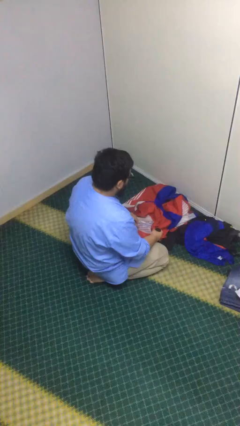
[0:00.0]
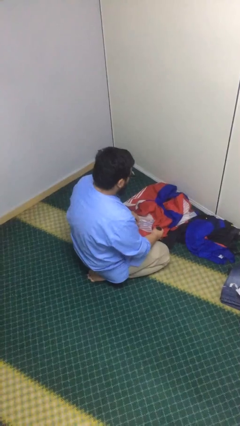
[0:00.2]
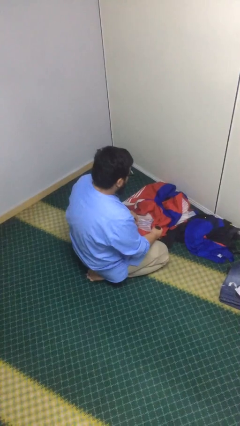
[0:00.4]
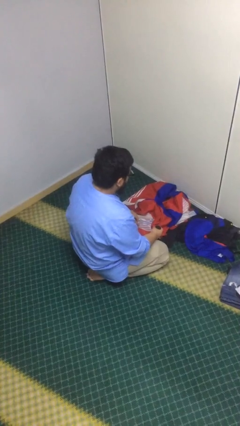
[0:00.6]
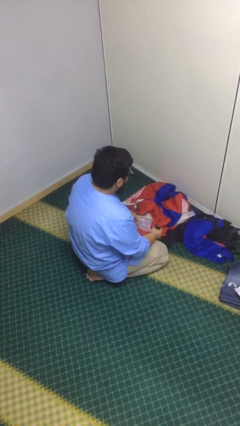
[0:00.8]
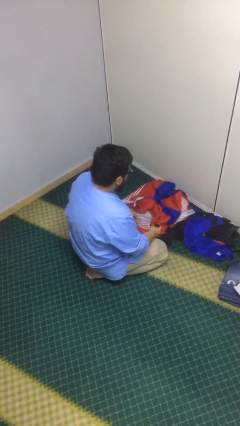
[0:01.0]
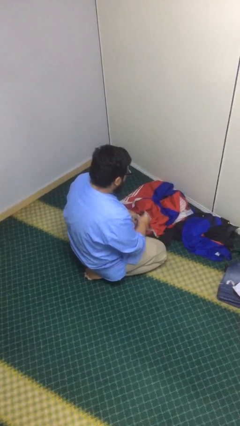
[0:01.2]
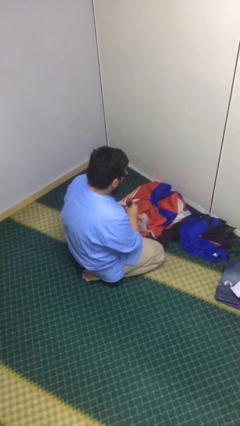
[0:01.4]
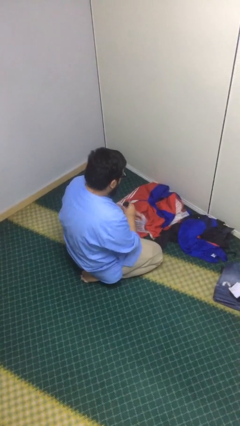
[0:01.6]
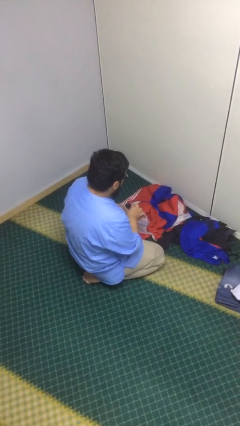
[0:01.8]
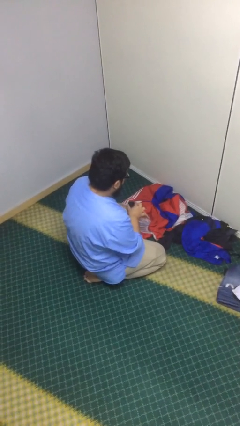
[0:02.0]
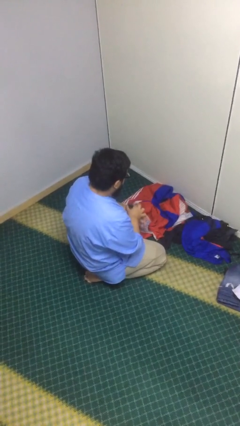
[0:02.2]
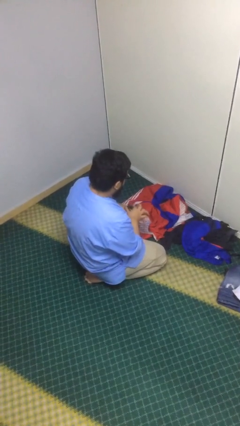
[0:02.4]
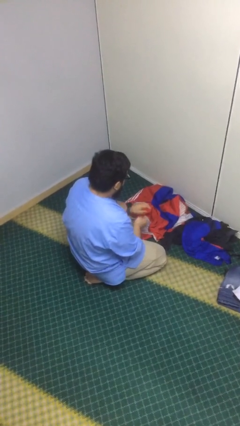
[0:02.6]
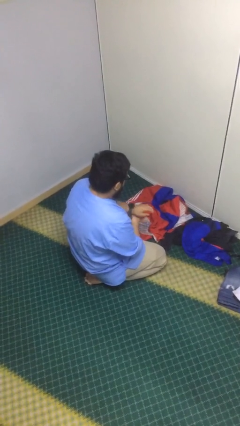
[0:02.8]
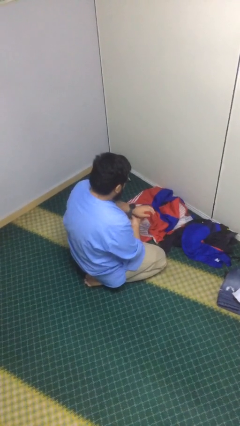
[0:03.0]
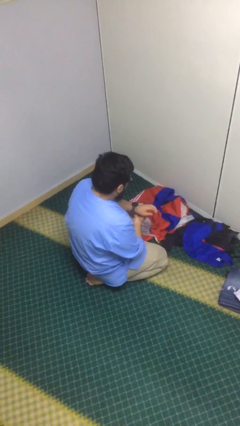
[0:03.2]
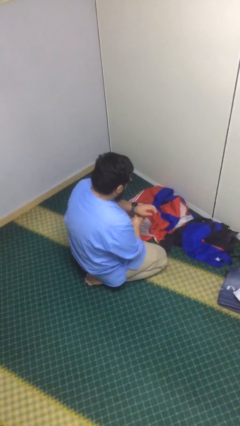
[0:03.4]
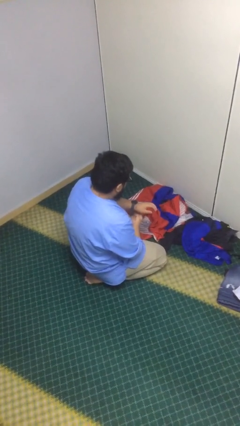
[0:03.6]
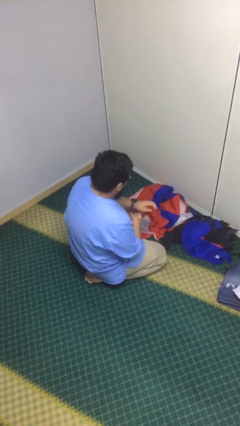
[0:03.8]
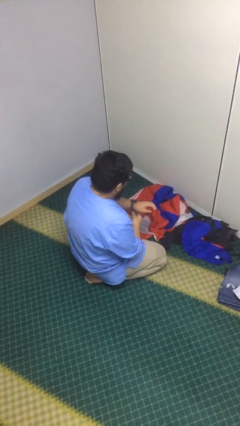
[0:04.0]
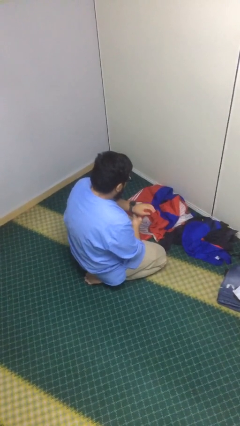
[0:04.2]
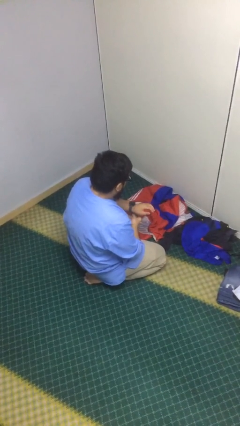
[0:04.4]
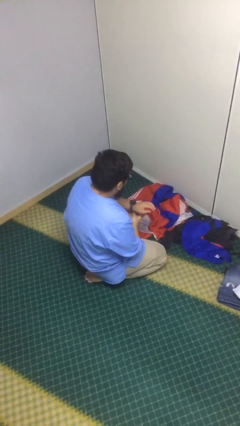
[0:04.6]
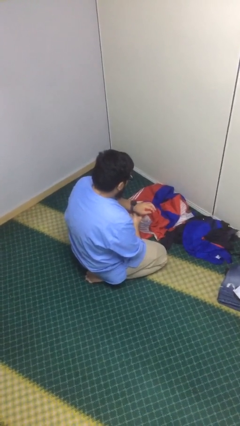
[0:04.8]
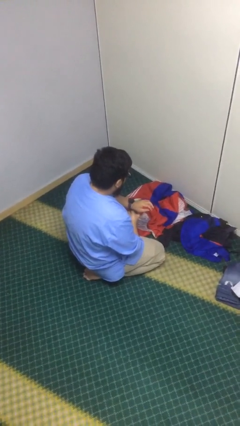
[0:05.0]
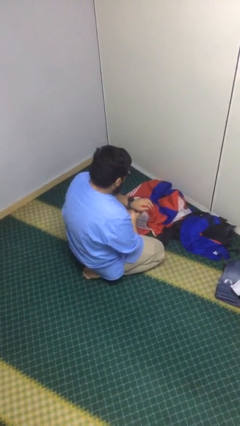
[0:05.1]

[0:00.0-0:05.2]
person puts on wristwatch

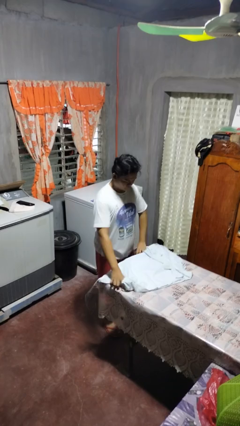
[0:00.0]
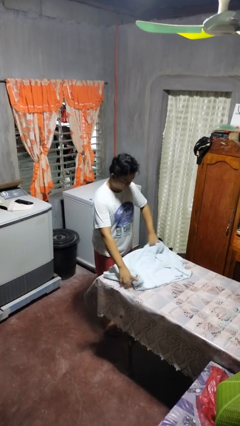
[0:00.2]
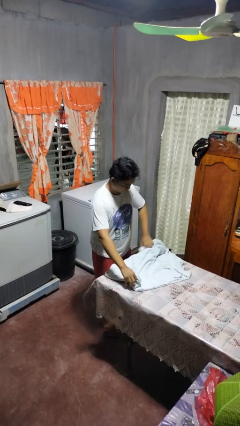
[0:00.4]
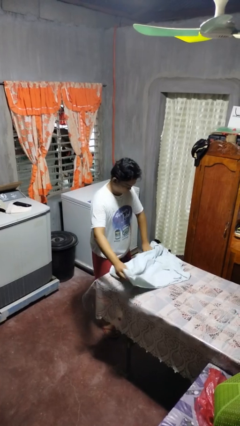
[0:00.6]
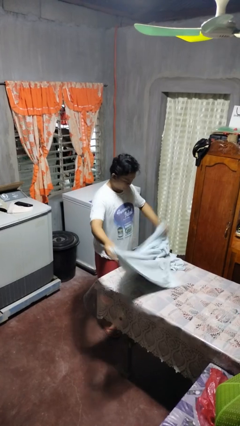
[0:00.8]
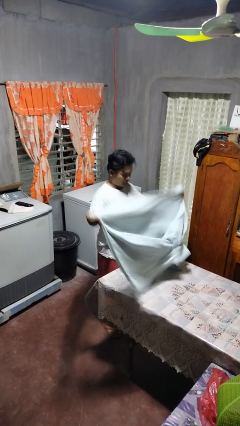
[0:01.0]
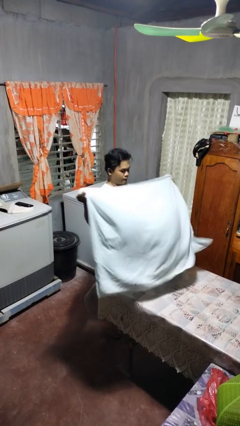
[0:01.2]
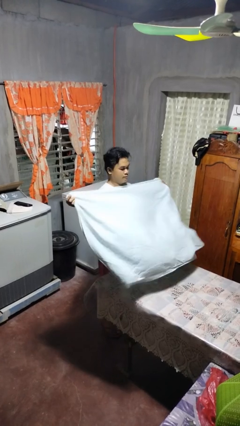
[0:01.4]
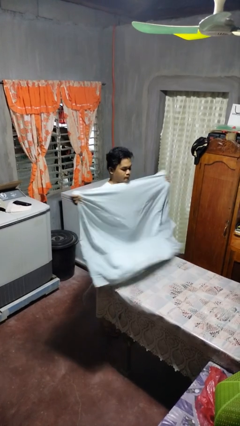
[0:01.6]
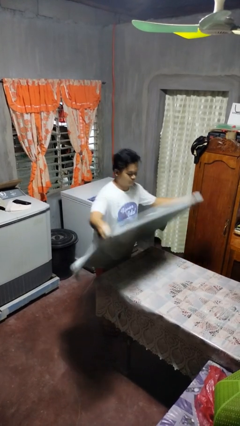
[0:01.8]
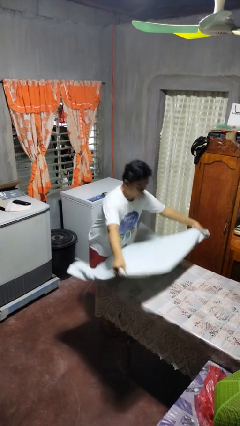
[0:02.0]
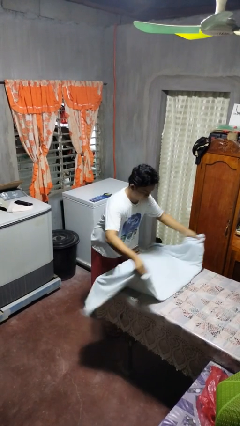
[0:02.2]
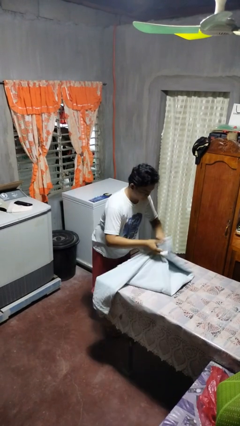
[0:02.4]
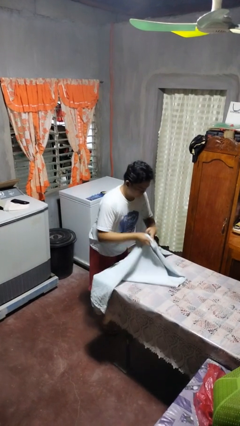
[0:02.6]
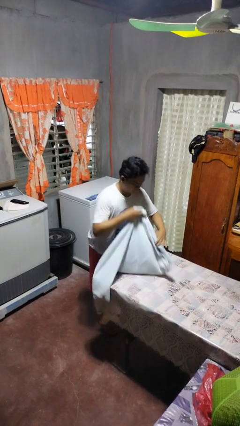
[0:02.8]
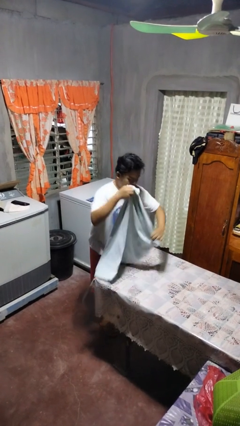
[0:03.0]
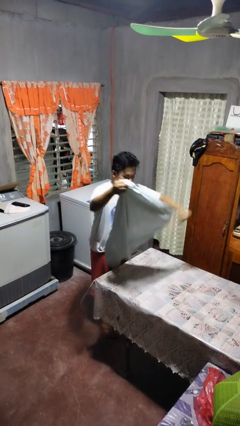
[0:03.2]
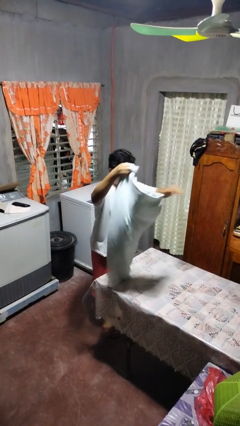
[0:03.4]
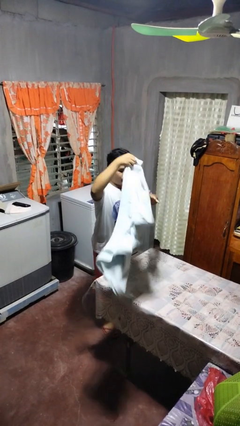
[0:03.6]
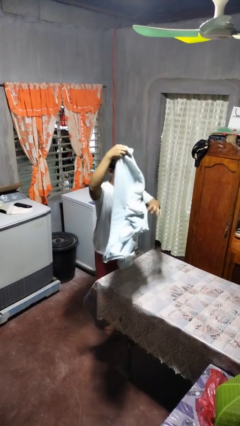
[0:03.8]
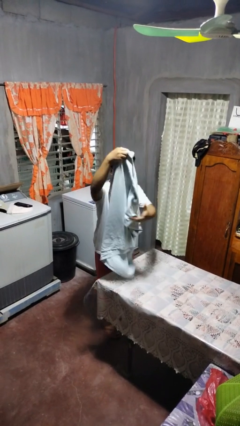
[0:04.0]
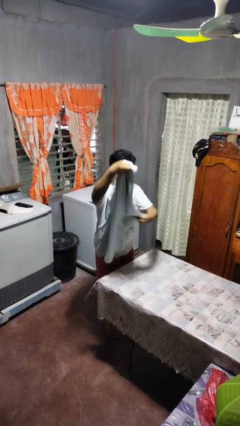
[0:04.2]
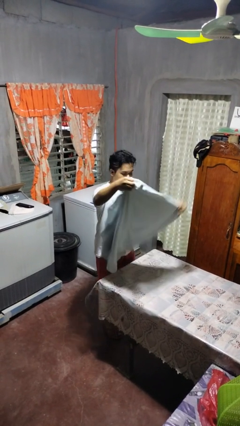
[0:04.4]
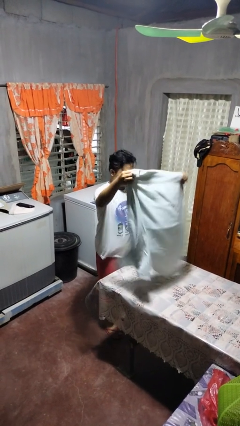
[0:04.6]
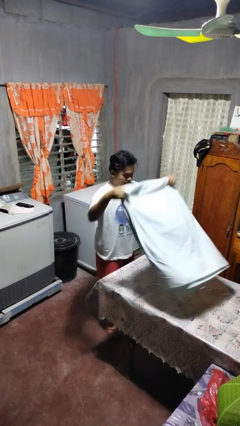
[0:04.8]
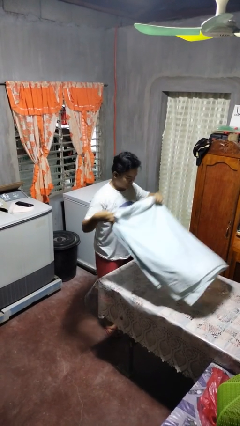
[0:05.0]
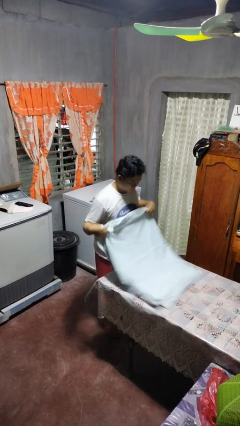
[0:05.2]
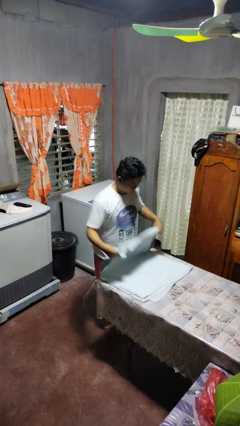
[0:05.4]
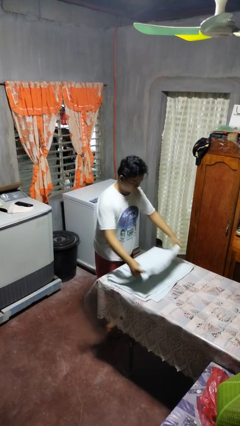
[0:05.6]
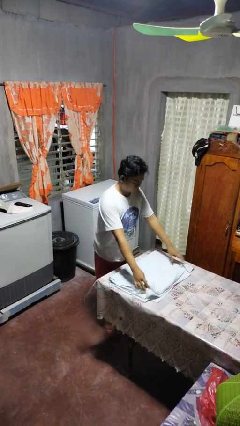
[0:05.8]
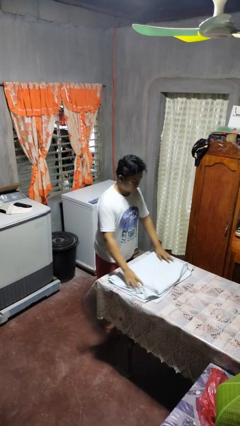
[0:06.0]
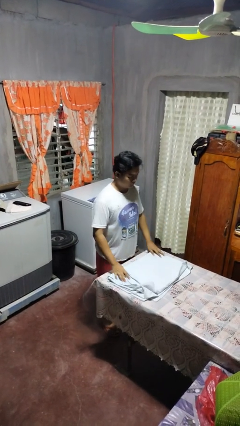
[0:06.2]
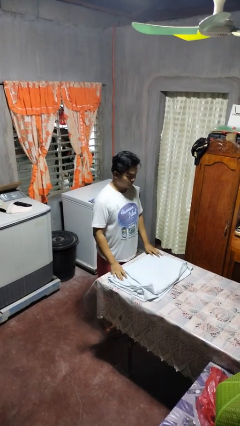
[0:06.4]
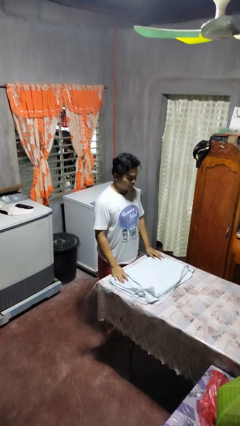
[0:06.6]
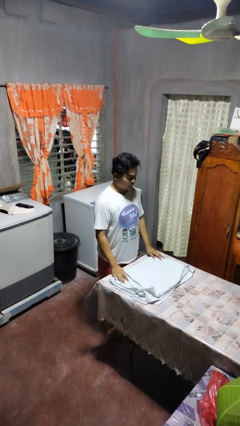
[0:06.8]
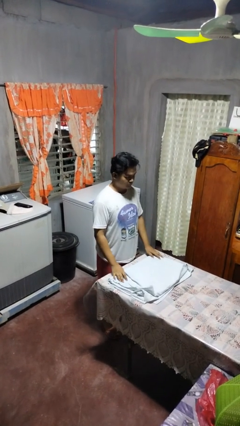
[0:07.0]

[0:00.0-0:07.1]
person folds blanket

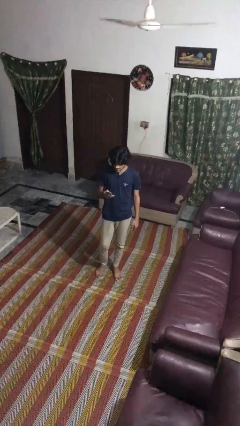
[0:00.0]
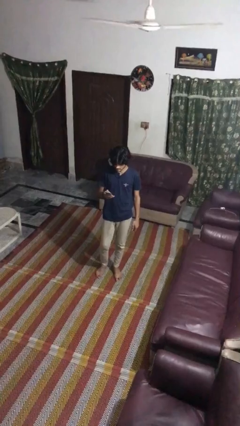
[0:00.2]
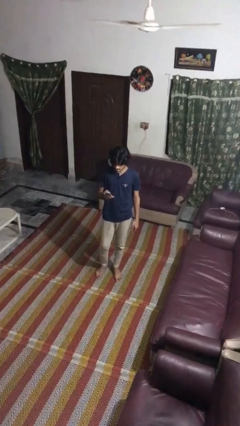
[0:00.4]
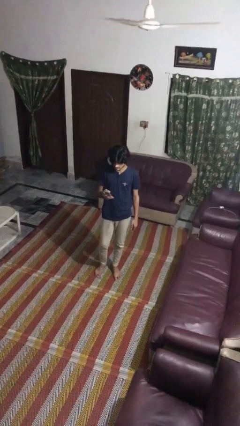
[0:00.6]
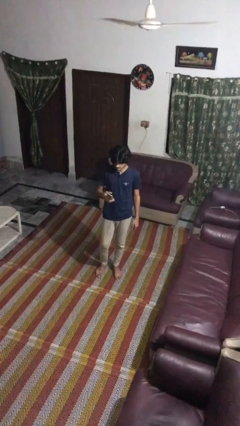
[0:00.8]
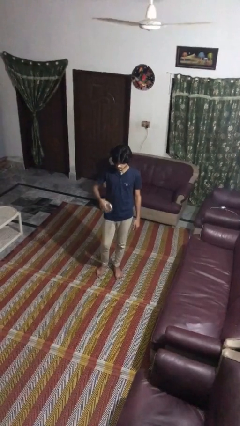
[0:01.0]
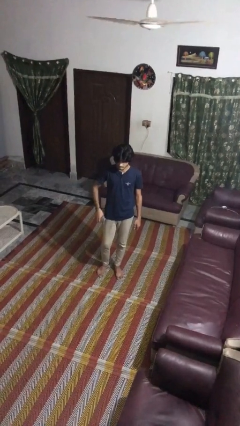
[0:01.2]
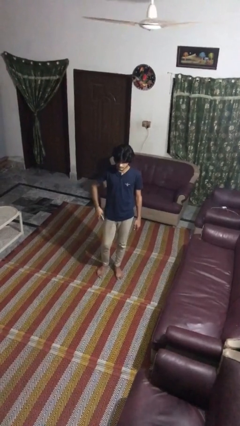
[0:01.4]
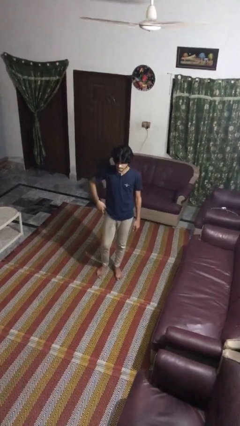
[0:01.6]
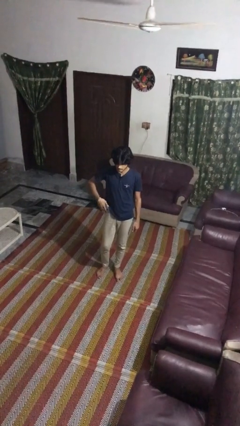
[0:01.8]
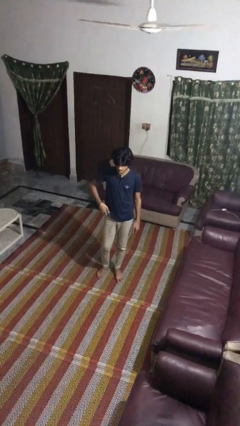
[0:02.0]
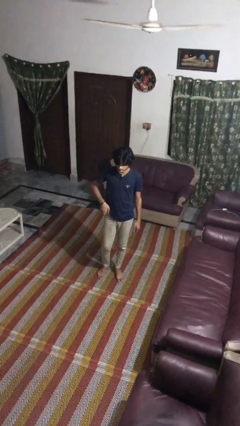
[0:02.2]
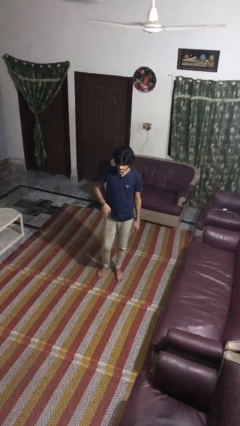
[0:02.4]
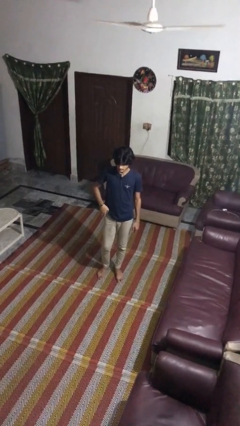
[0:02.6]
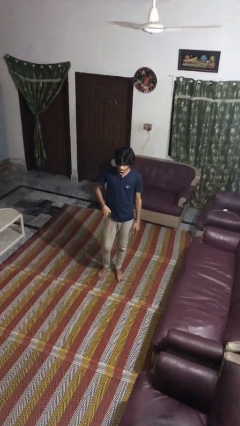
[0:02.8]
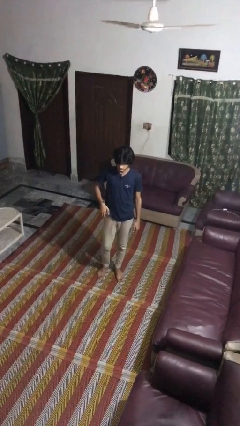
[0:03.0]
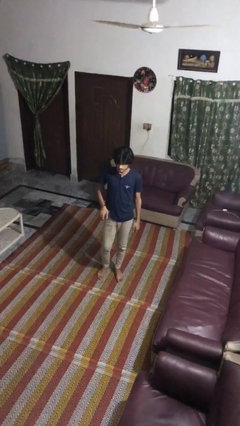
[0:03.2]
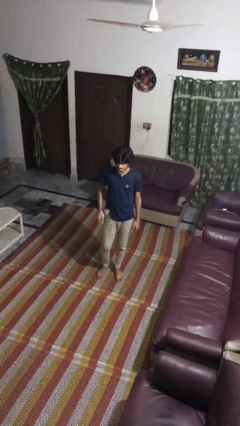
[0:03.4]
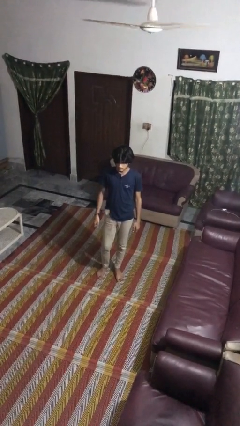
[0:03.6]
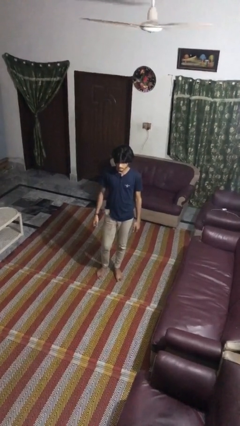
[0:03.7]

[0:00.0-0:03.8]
person puts phone into pocket

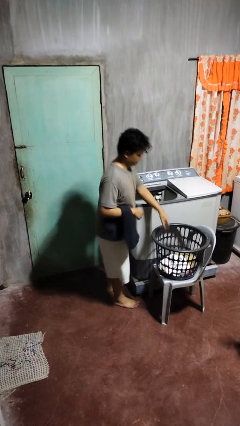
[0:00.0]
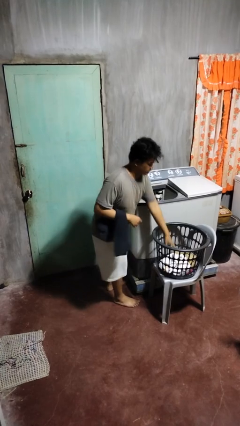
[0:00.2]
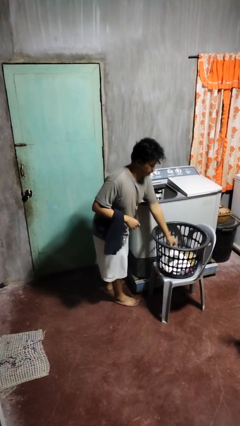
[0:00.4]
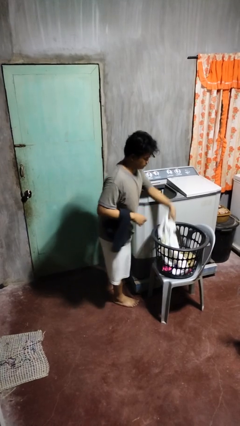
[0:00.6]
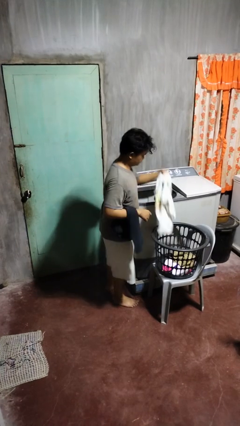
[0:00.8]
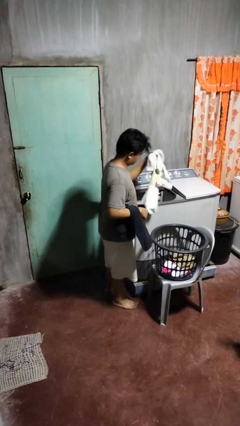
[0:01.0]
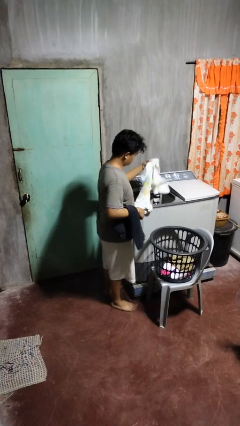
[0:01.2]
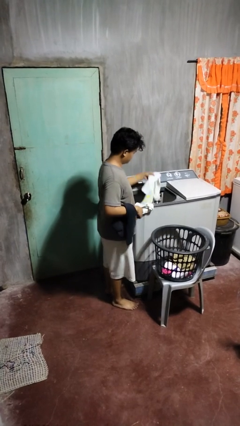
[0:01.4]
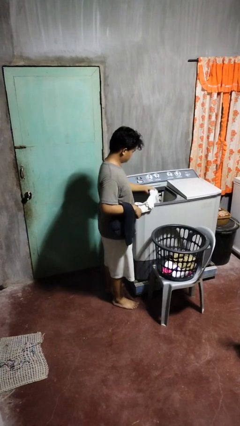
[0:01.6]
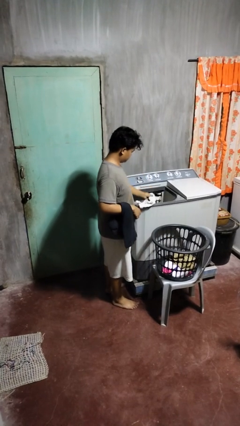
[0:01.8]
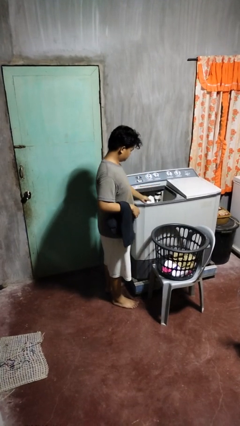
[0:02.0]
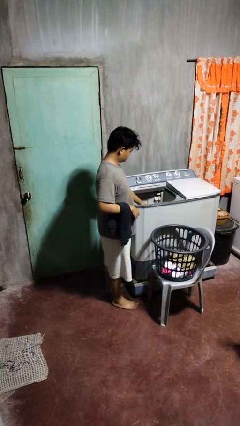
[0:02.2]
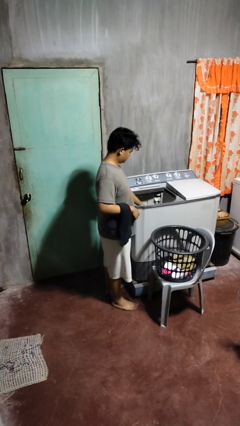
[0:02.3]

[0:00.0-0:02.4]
person loads clotheswasher
